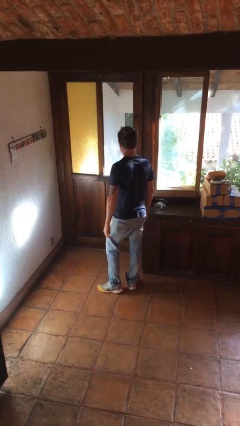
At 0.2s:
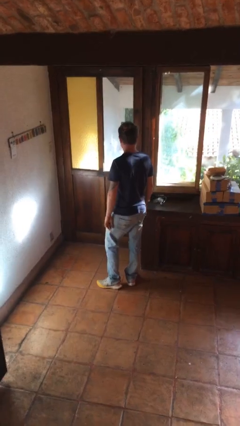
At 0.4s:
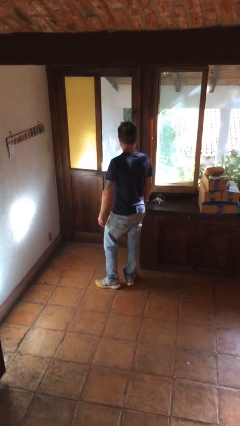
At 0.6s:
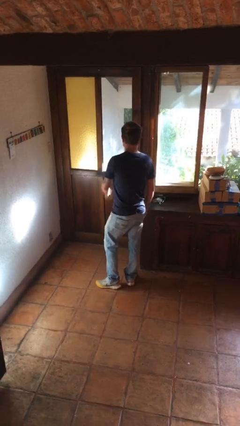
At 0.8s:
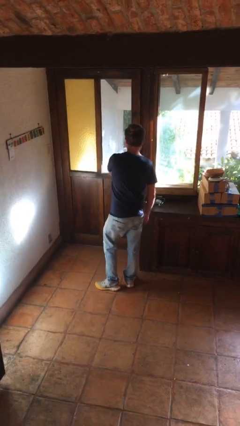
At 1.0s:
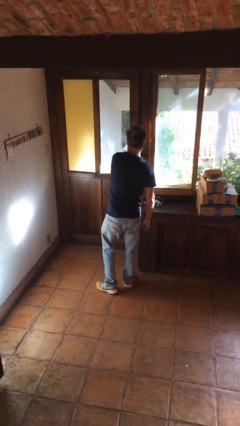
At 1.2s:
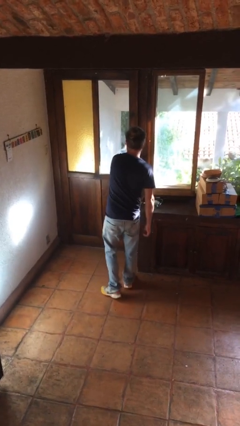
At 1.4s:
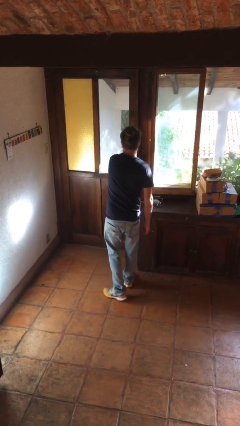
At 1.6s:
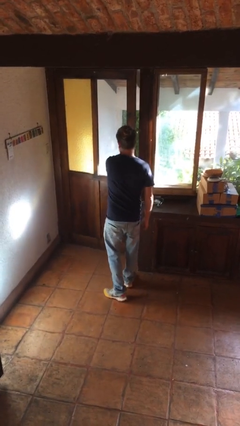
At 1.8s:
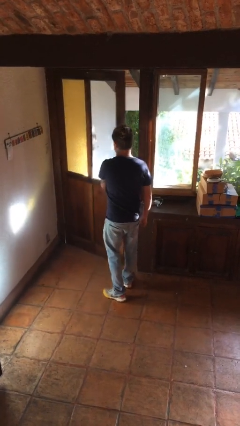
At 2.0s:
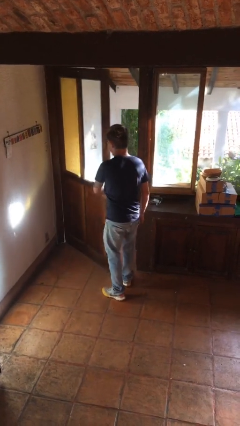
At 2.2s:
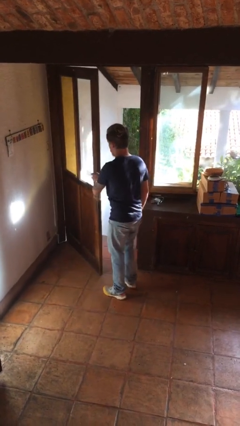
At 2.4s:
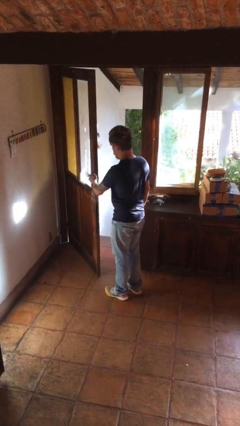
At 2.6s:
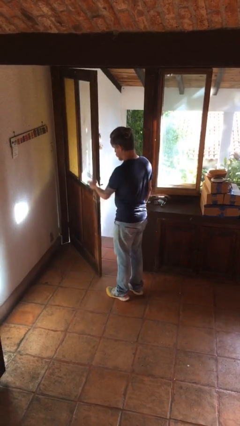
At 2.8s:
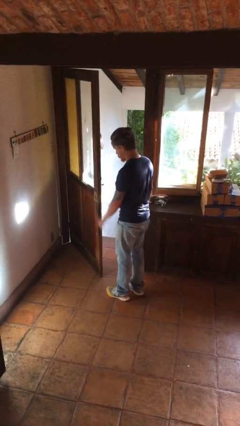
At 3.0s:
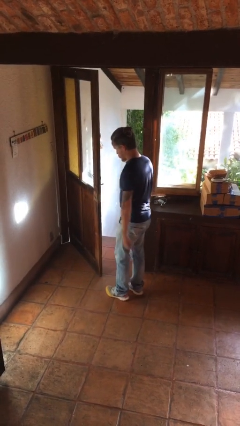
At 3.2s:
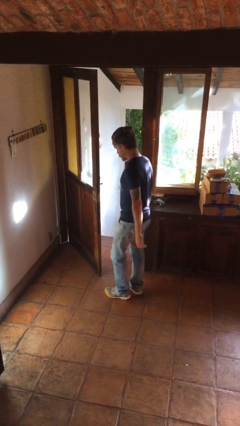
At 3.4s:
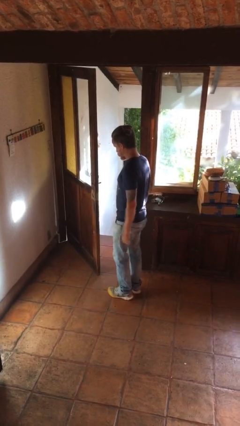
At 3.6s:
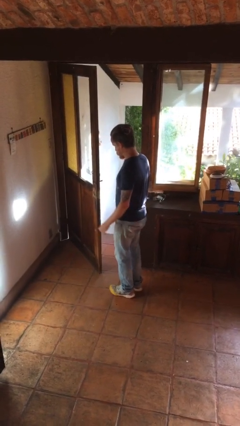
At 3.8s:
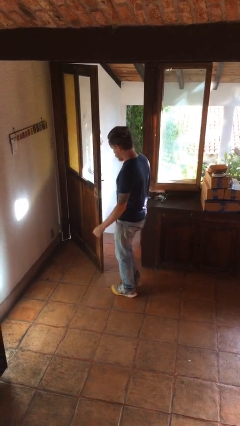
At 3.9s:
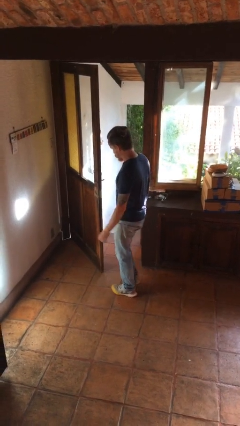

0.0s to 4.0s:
person opens facility door

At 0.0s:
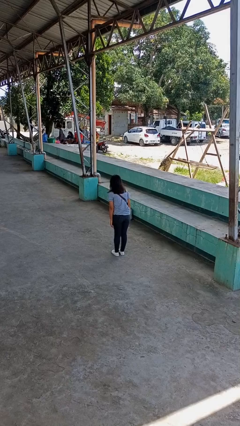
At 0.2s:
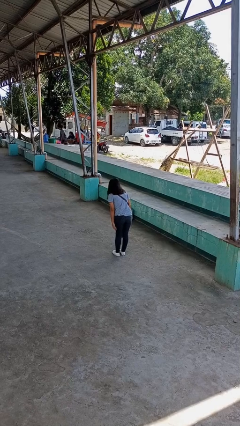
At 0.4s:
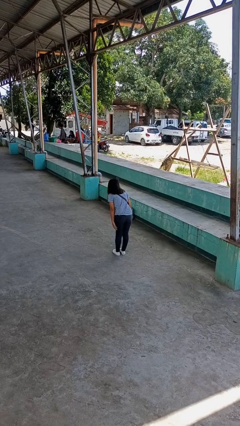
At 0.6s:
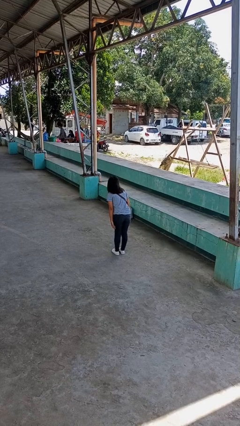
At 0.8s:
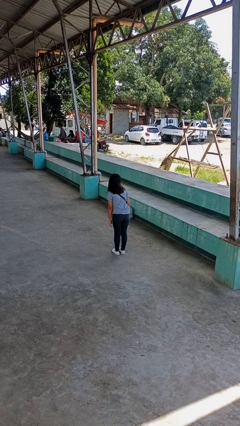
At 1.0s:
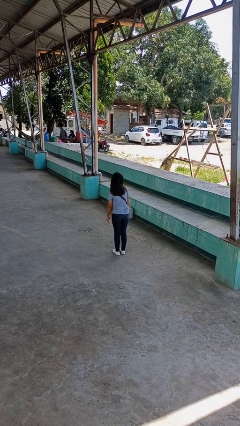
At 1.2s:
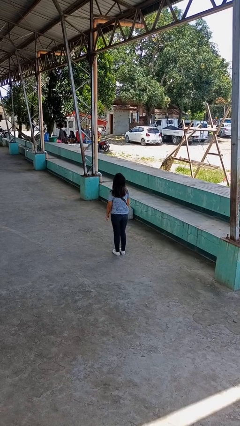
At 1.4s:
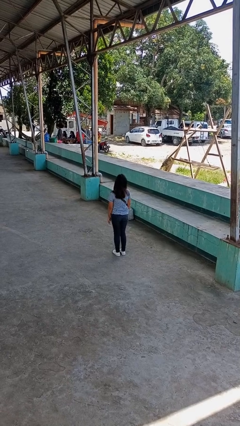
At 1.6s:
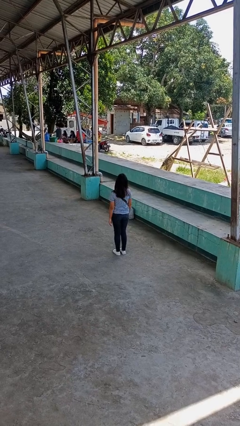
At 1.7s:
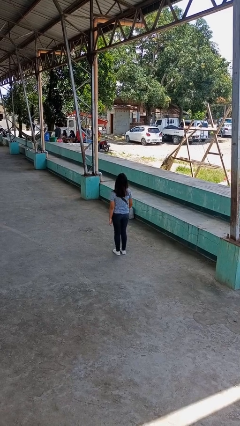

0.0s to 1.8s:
person bows

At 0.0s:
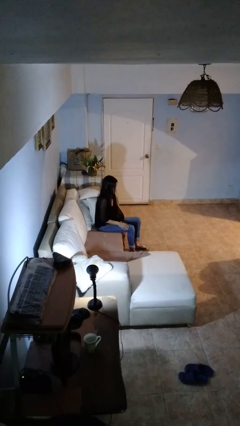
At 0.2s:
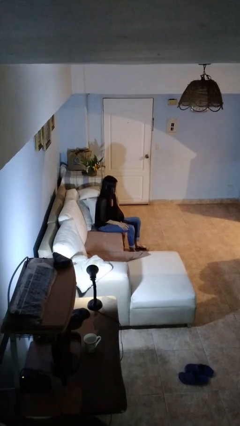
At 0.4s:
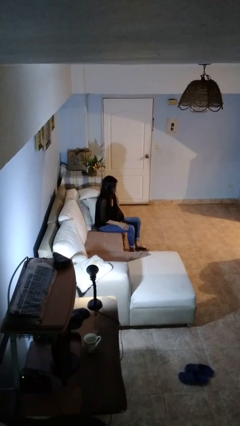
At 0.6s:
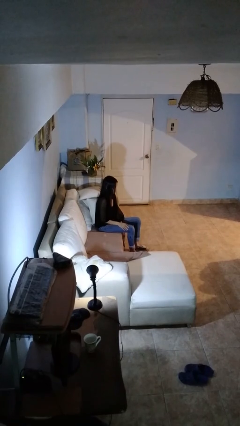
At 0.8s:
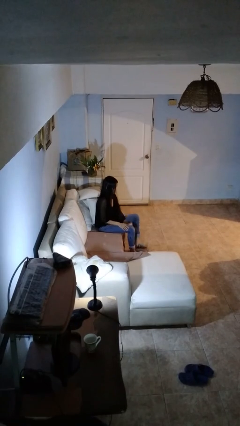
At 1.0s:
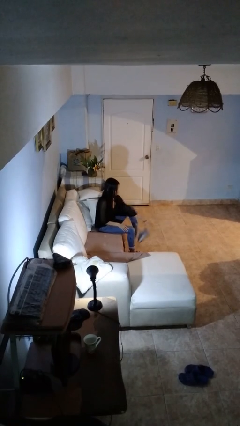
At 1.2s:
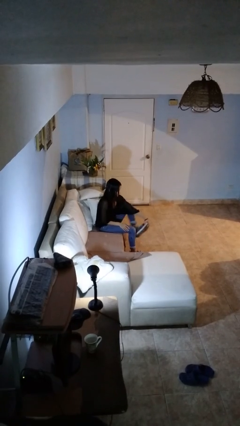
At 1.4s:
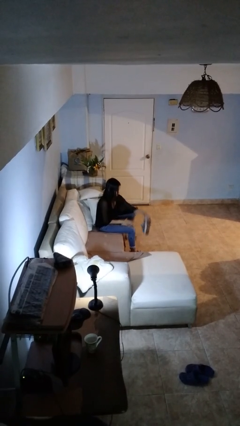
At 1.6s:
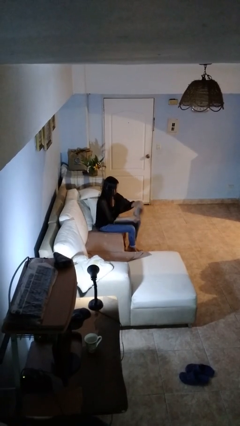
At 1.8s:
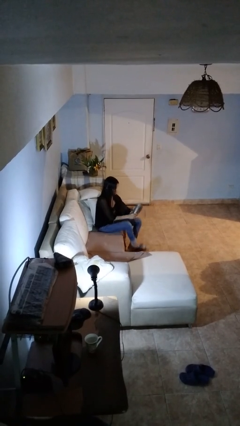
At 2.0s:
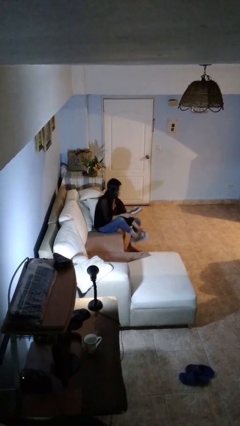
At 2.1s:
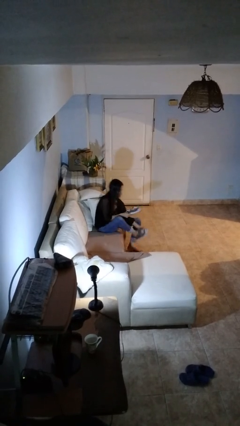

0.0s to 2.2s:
person takes off shoes

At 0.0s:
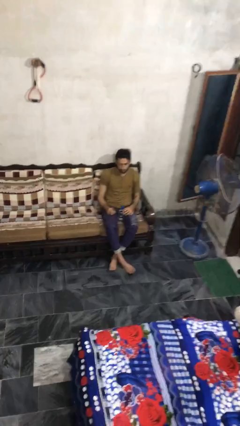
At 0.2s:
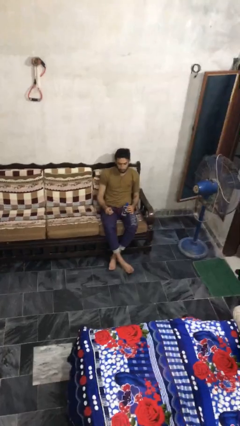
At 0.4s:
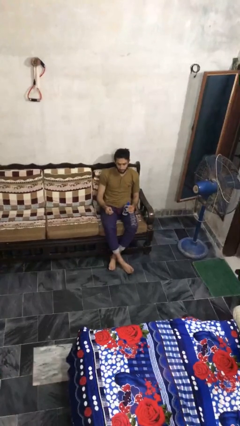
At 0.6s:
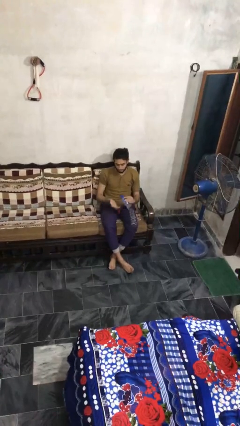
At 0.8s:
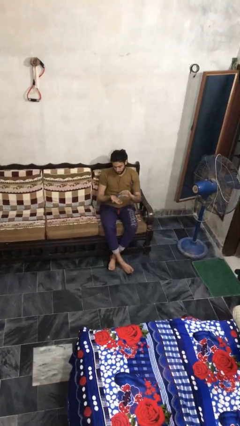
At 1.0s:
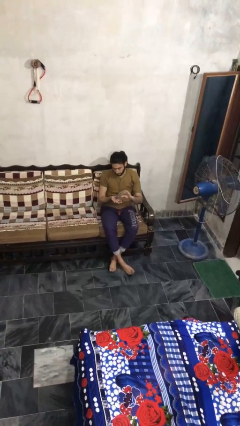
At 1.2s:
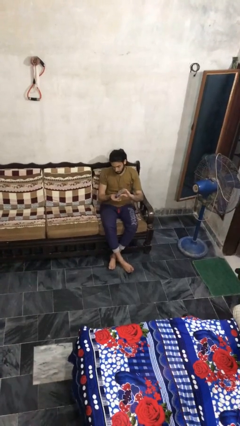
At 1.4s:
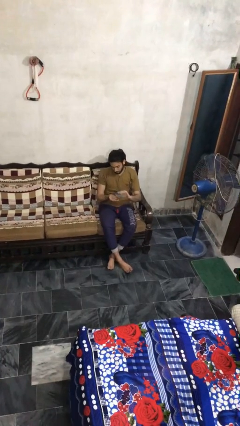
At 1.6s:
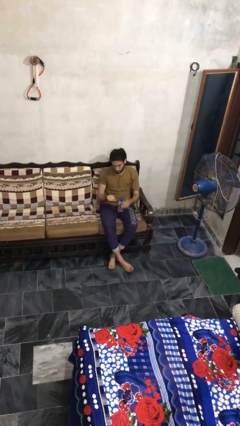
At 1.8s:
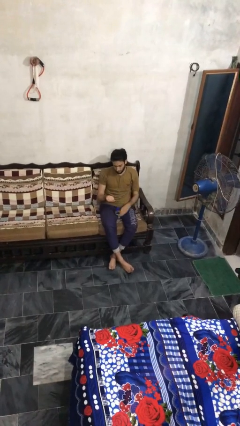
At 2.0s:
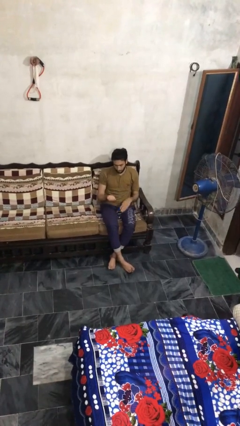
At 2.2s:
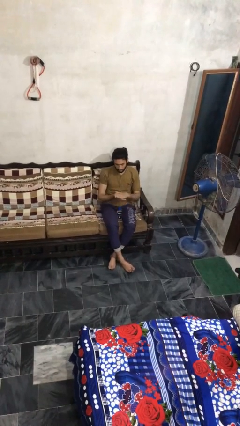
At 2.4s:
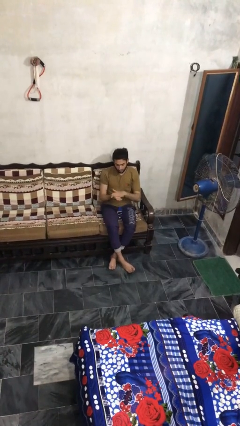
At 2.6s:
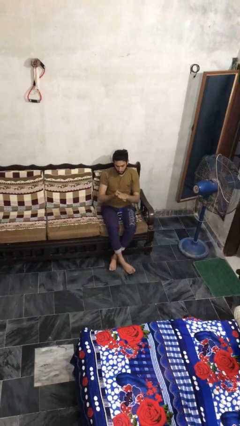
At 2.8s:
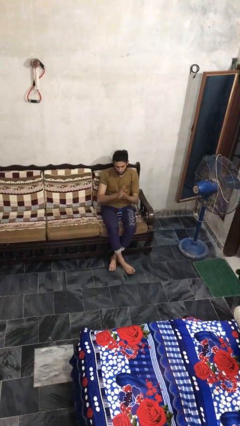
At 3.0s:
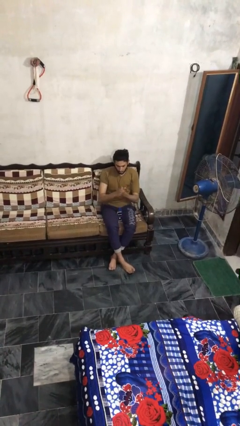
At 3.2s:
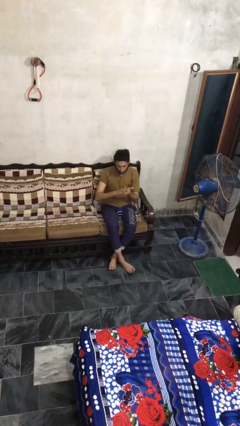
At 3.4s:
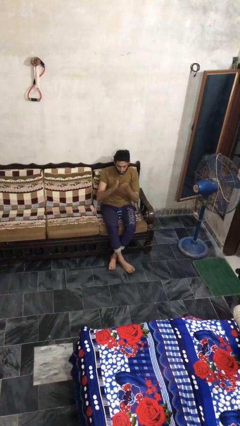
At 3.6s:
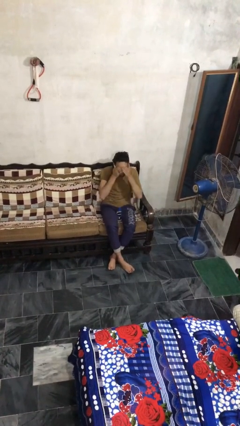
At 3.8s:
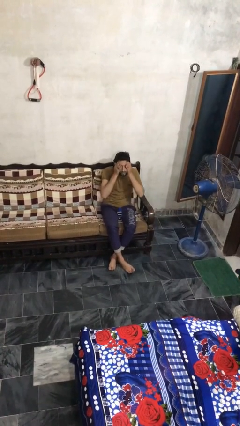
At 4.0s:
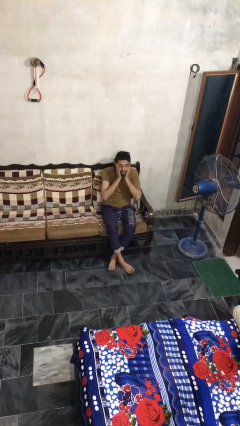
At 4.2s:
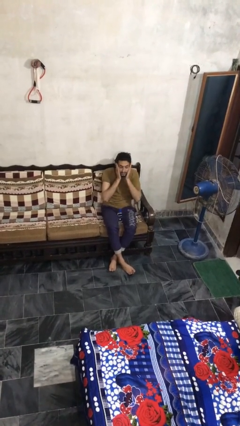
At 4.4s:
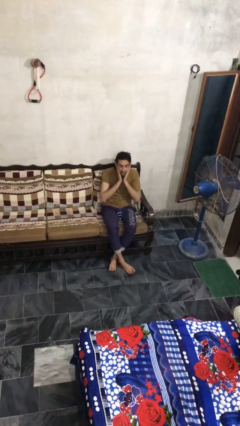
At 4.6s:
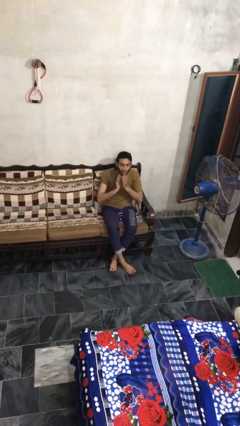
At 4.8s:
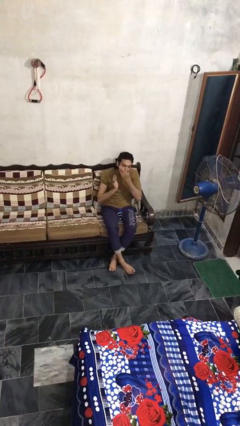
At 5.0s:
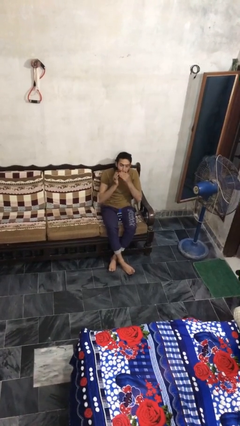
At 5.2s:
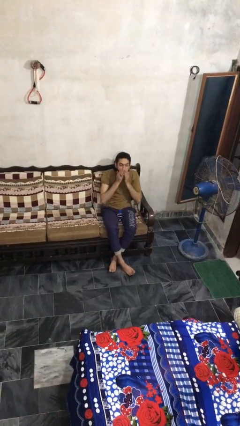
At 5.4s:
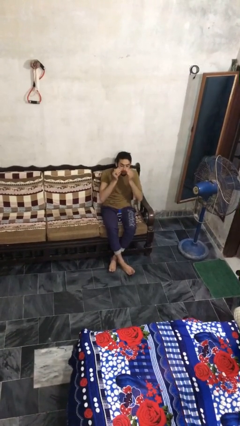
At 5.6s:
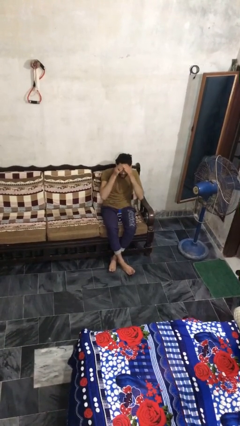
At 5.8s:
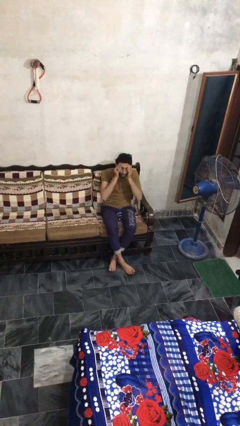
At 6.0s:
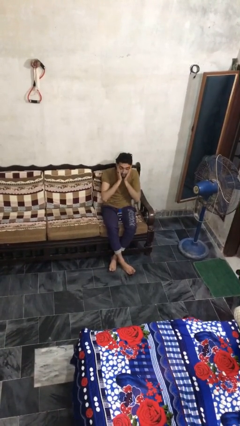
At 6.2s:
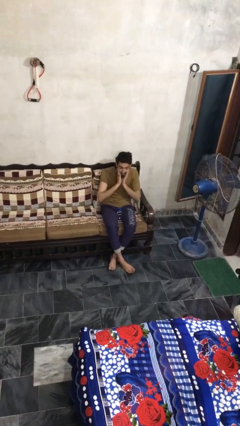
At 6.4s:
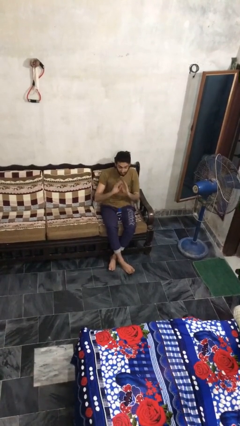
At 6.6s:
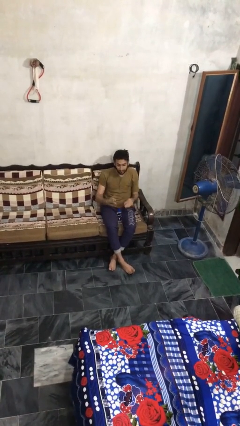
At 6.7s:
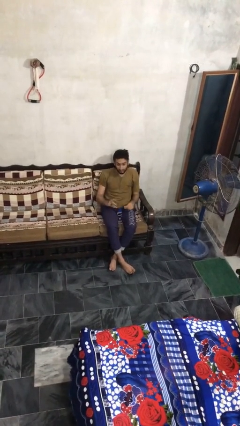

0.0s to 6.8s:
person applies facial moisturizer

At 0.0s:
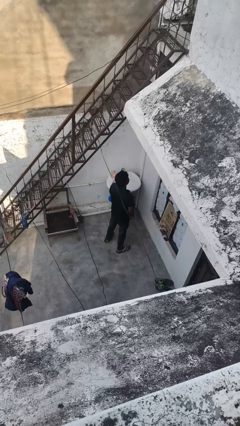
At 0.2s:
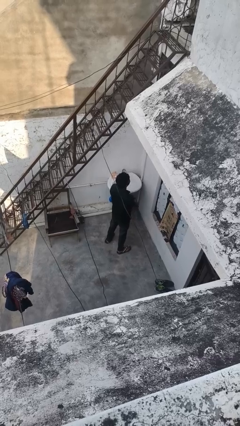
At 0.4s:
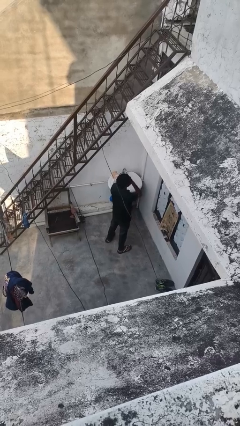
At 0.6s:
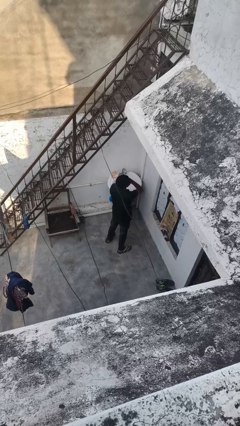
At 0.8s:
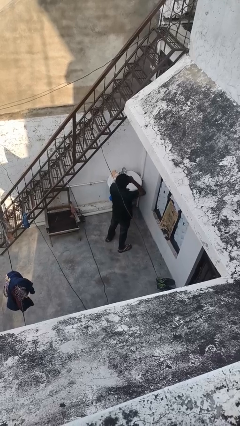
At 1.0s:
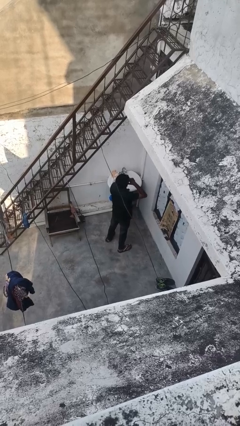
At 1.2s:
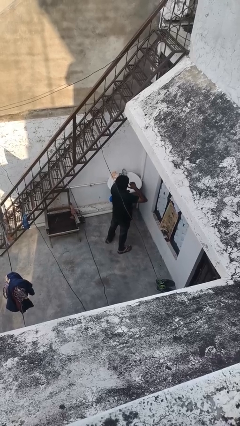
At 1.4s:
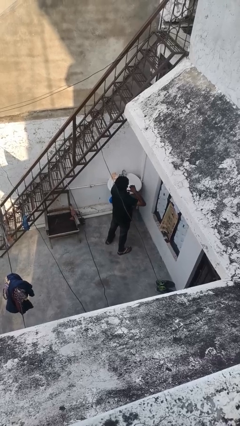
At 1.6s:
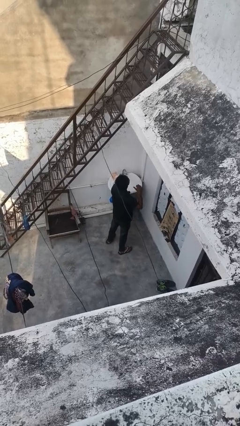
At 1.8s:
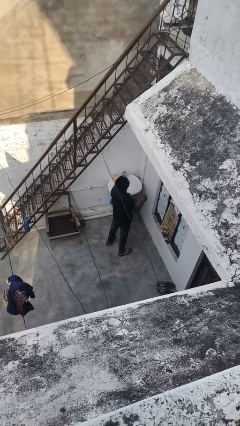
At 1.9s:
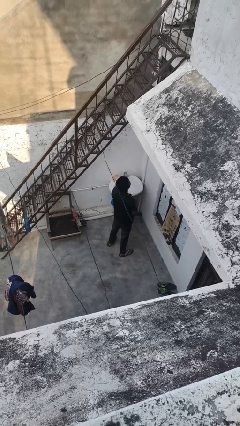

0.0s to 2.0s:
person gestures cut

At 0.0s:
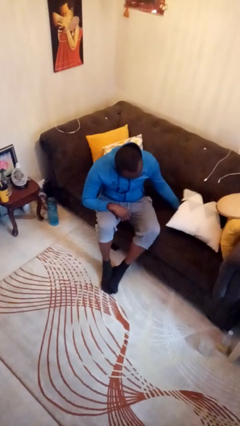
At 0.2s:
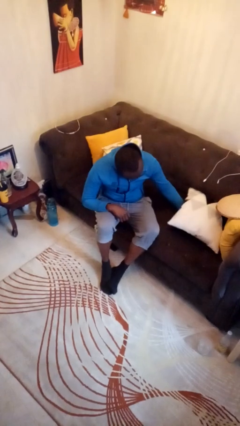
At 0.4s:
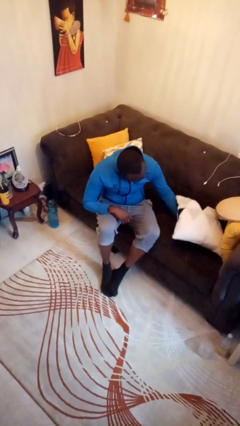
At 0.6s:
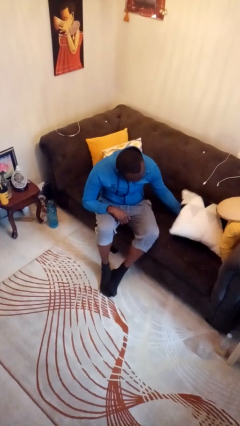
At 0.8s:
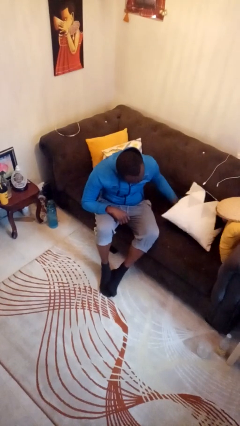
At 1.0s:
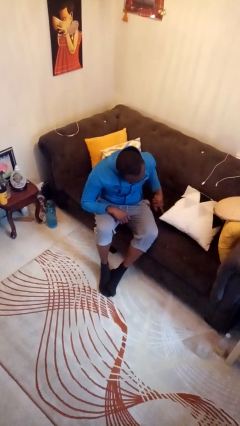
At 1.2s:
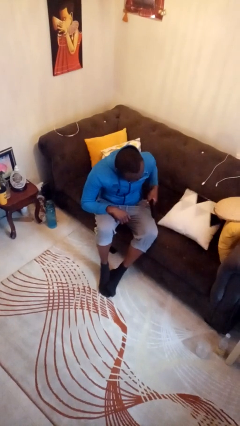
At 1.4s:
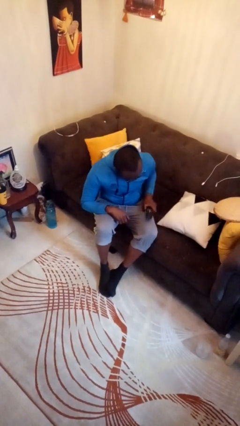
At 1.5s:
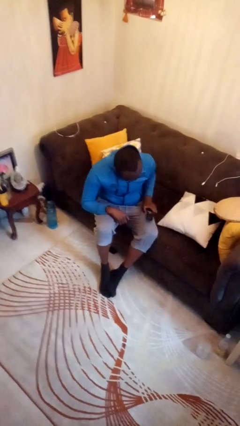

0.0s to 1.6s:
person searches under couch
